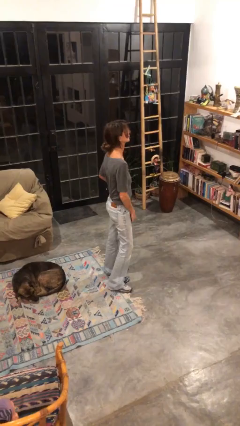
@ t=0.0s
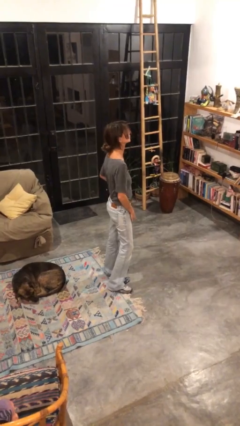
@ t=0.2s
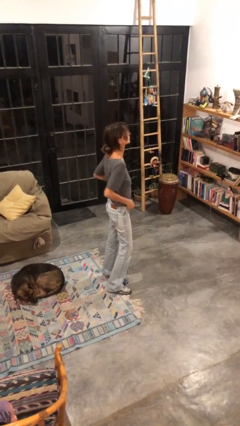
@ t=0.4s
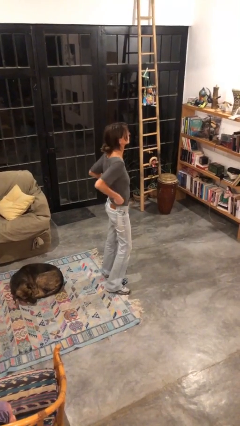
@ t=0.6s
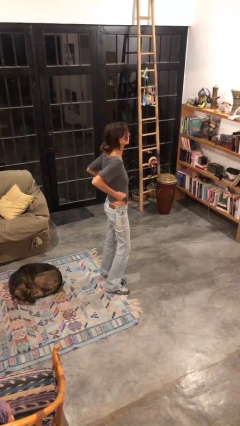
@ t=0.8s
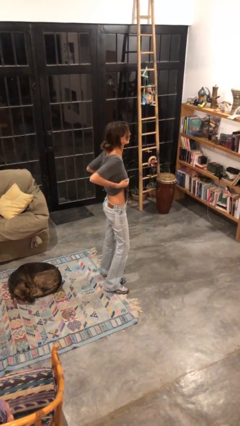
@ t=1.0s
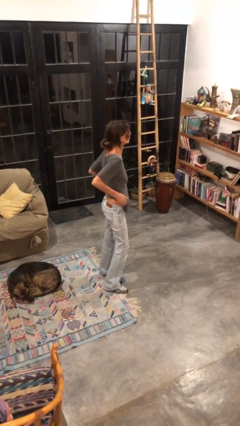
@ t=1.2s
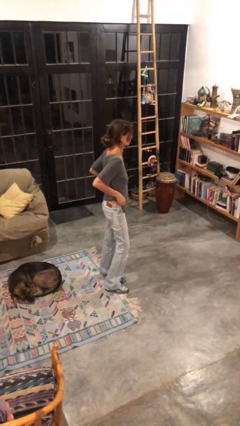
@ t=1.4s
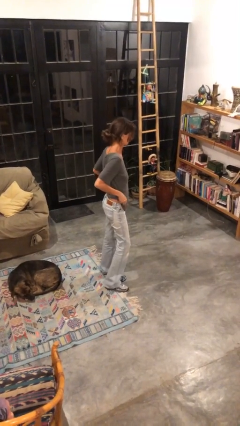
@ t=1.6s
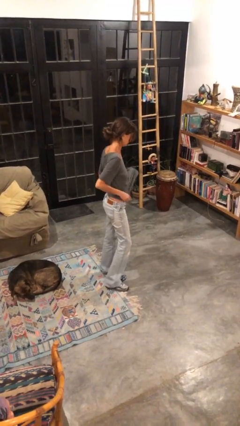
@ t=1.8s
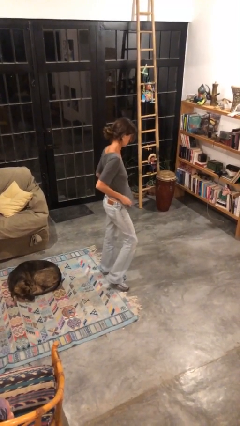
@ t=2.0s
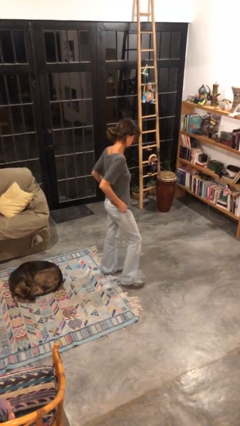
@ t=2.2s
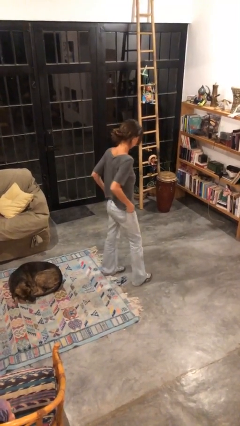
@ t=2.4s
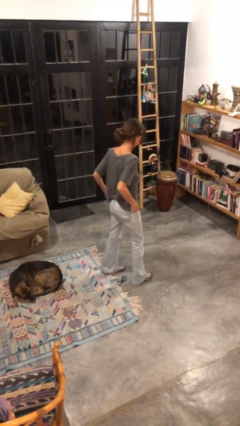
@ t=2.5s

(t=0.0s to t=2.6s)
person untucks shirt

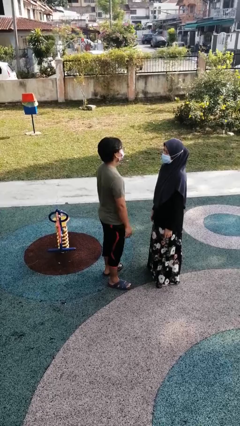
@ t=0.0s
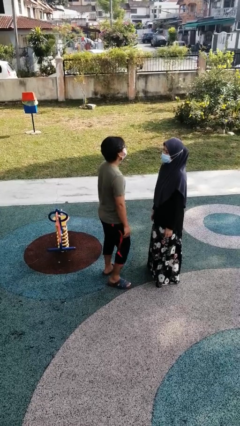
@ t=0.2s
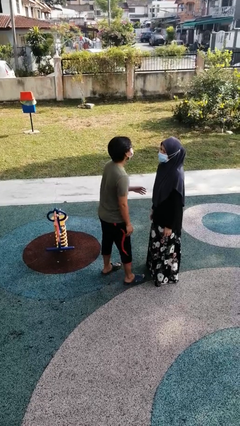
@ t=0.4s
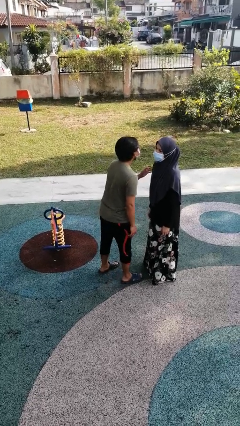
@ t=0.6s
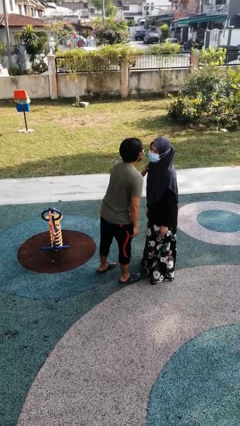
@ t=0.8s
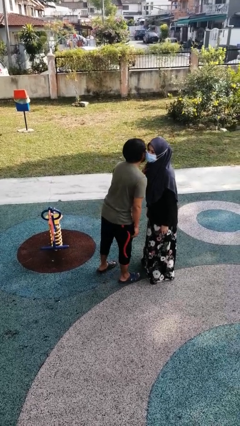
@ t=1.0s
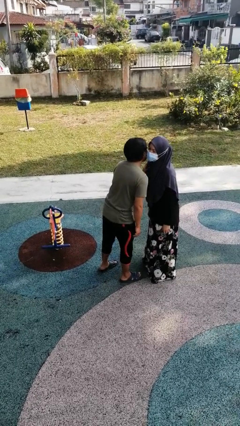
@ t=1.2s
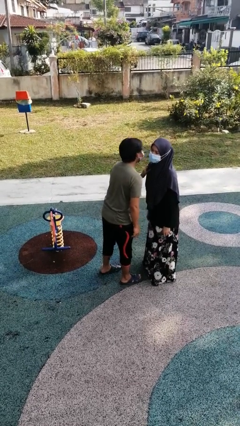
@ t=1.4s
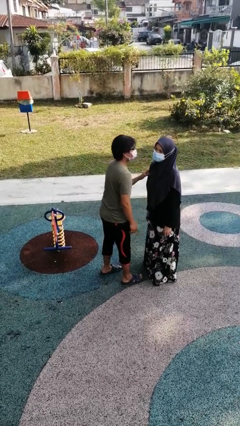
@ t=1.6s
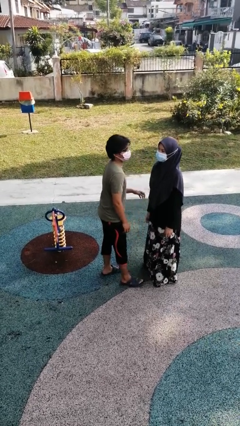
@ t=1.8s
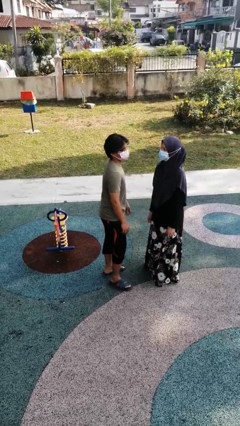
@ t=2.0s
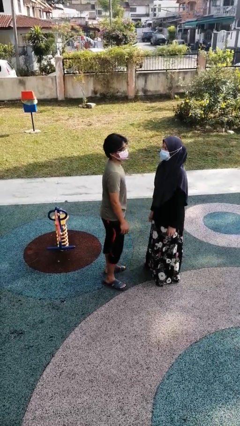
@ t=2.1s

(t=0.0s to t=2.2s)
person kisses cheek of person

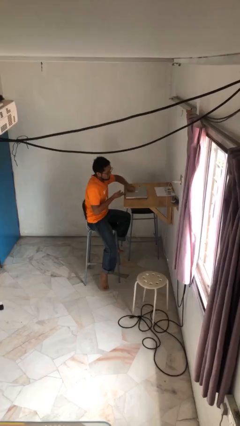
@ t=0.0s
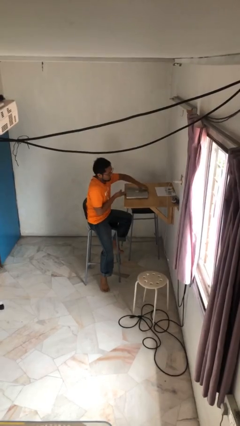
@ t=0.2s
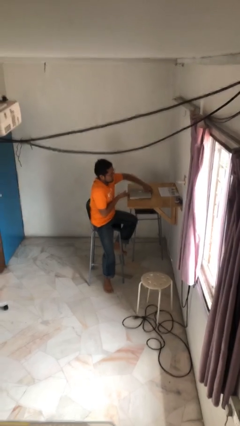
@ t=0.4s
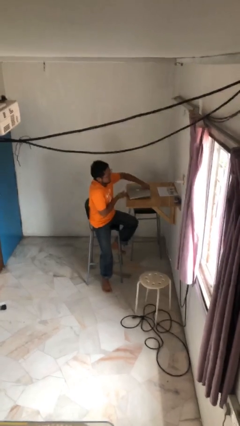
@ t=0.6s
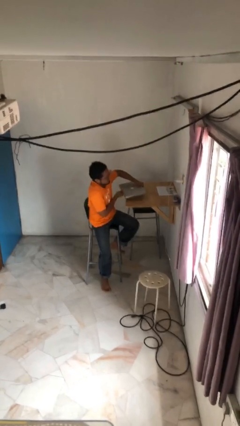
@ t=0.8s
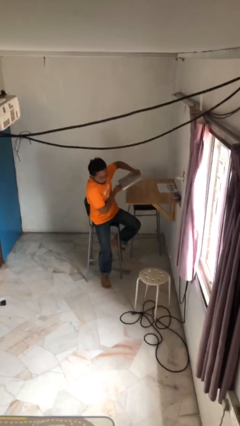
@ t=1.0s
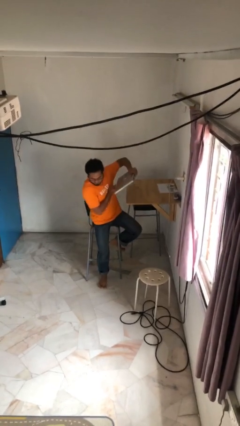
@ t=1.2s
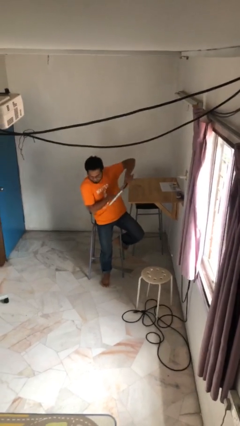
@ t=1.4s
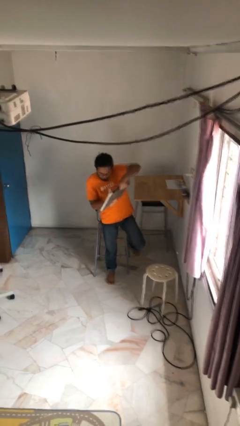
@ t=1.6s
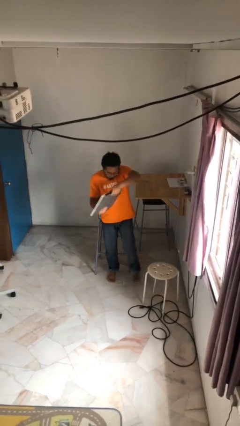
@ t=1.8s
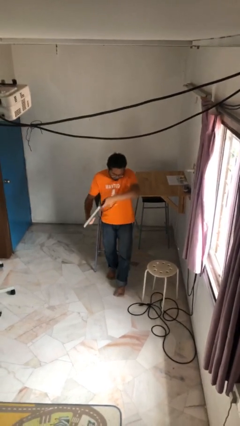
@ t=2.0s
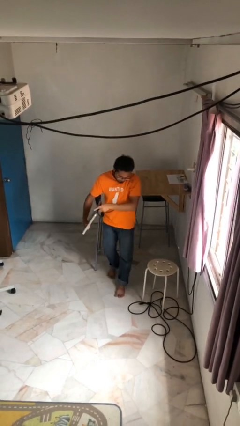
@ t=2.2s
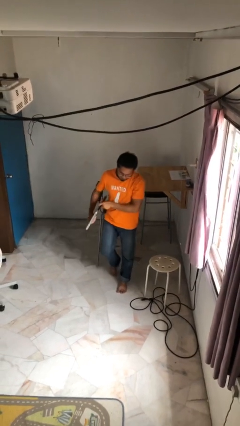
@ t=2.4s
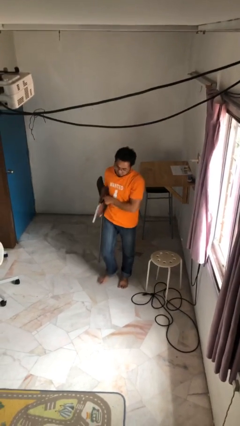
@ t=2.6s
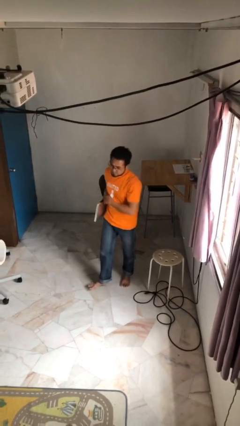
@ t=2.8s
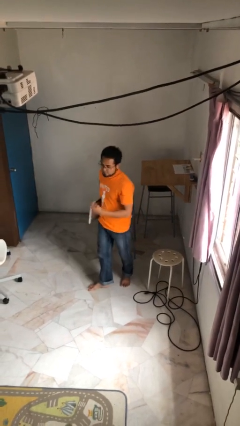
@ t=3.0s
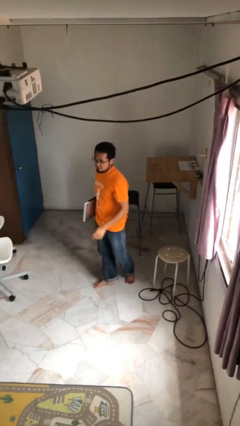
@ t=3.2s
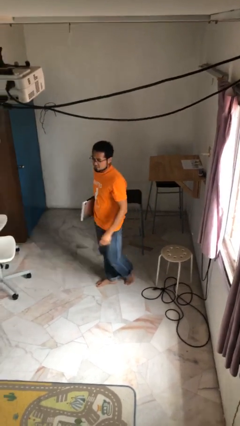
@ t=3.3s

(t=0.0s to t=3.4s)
person stands up

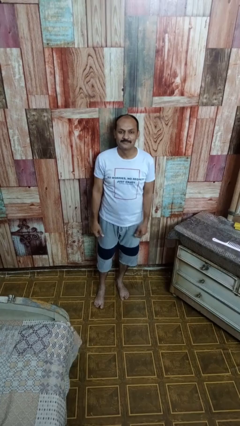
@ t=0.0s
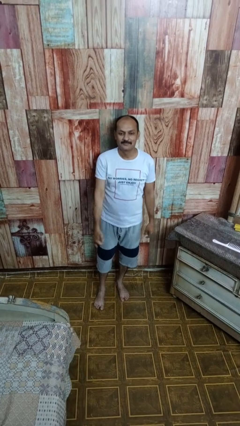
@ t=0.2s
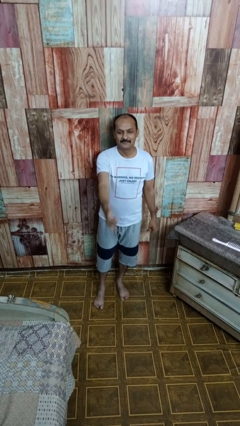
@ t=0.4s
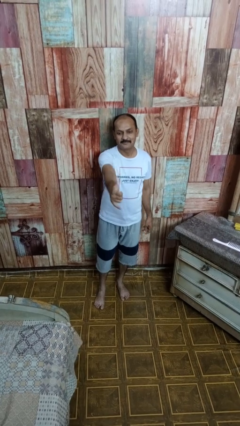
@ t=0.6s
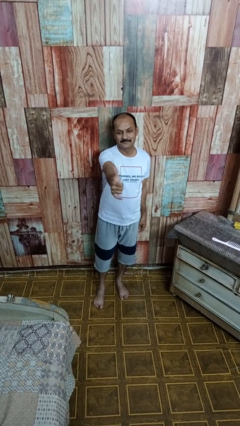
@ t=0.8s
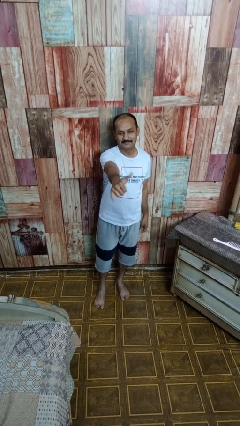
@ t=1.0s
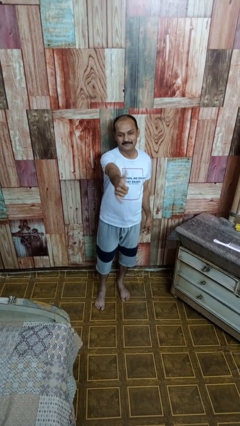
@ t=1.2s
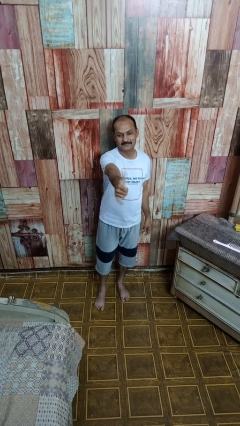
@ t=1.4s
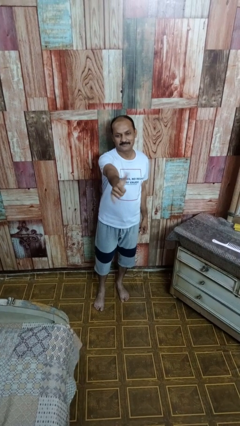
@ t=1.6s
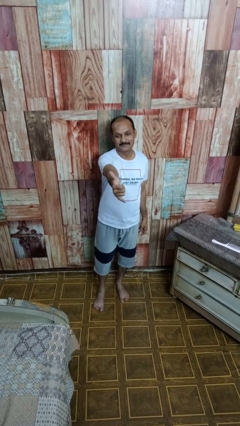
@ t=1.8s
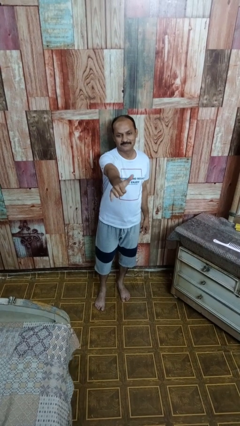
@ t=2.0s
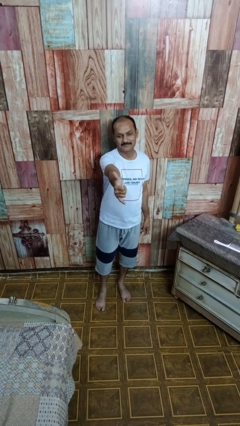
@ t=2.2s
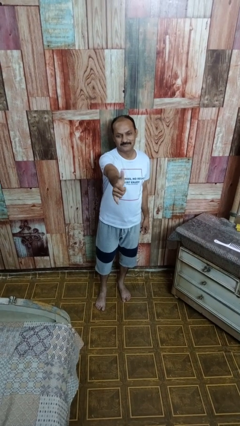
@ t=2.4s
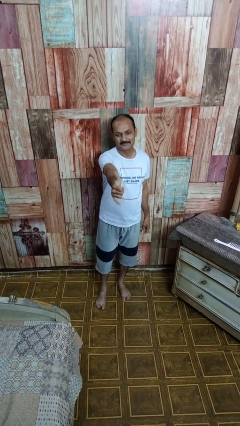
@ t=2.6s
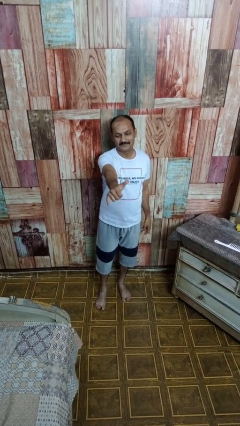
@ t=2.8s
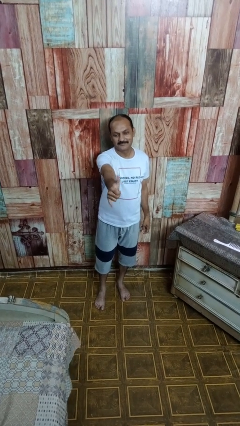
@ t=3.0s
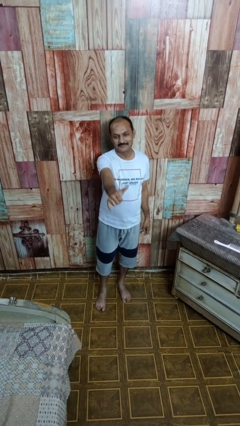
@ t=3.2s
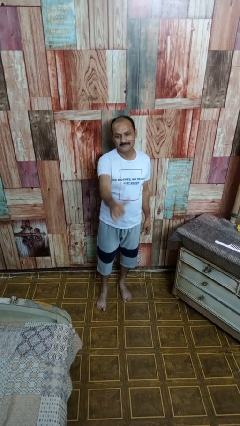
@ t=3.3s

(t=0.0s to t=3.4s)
person gestures hang loose

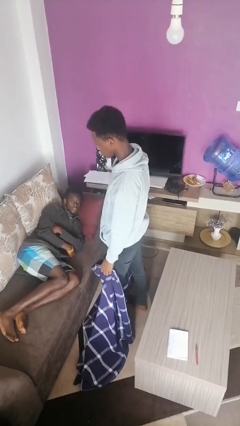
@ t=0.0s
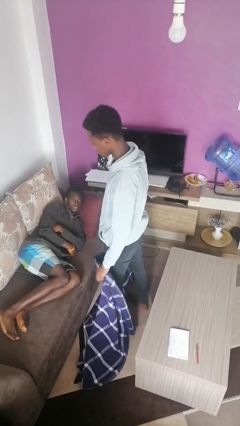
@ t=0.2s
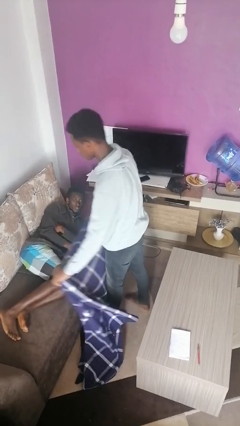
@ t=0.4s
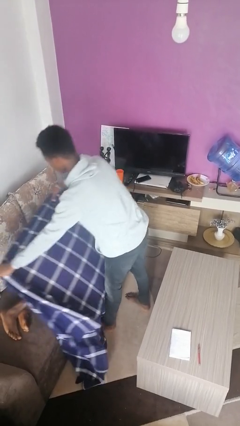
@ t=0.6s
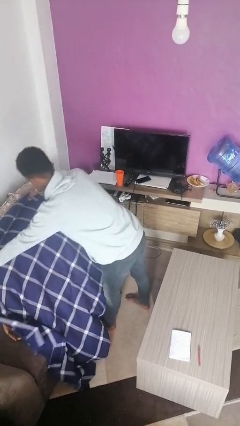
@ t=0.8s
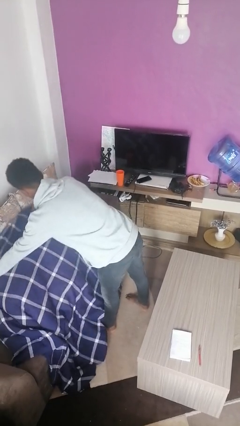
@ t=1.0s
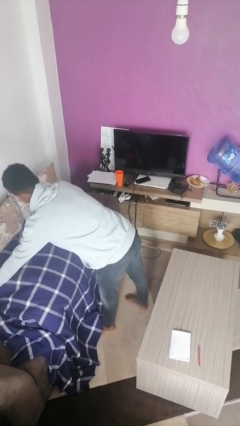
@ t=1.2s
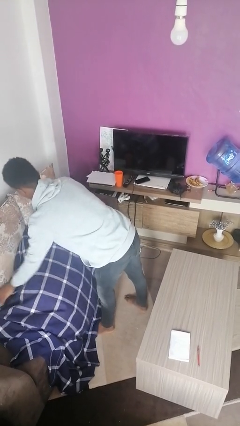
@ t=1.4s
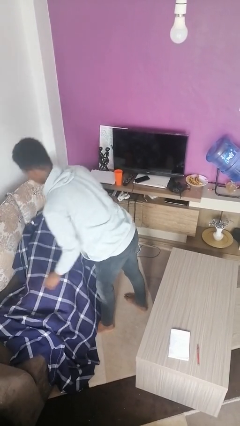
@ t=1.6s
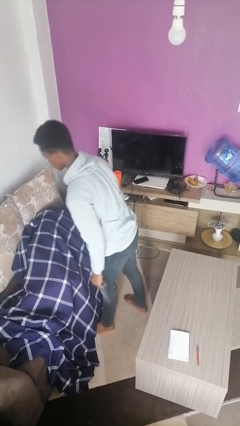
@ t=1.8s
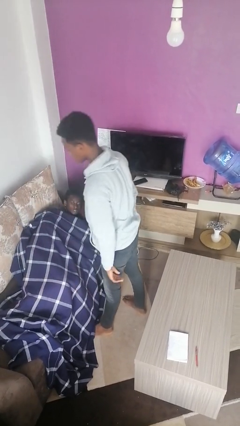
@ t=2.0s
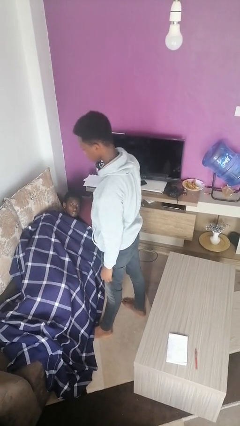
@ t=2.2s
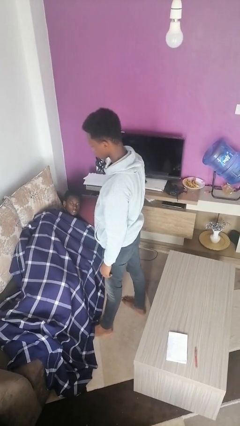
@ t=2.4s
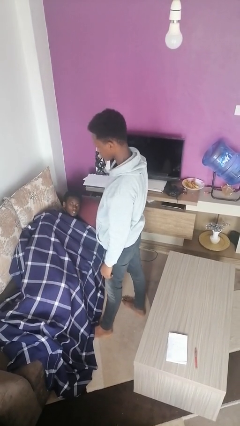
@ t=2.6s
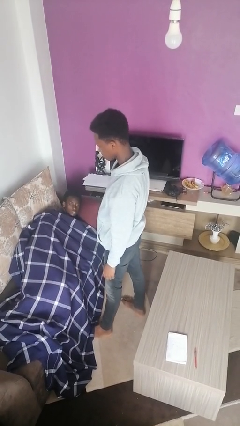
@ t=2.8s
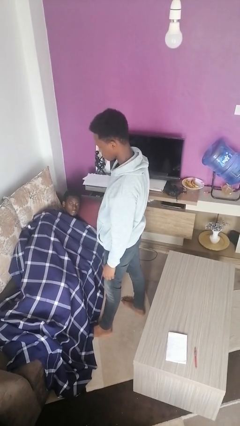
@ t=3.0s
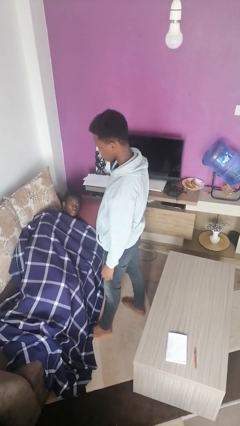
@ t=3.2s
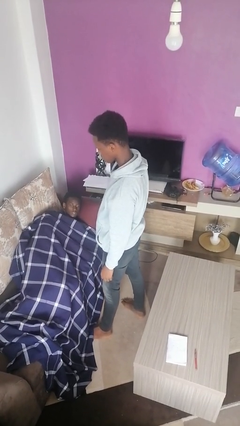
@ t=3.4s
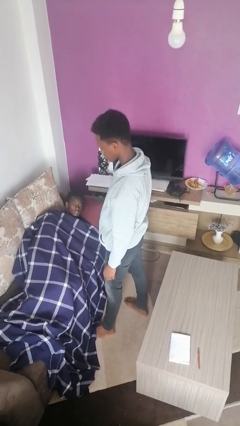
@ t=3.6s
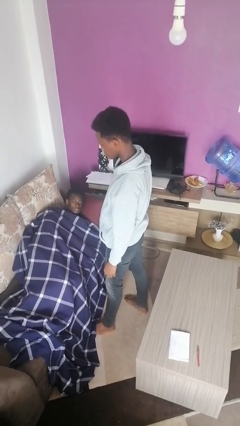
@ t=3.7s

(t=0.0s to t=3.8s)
person covers friend with blanket

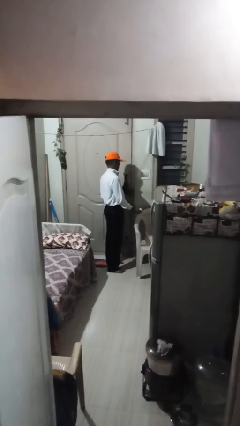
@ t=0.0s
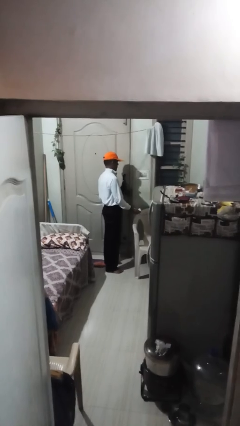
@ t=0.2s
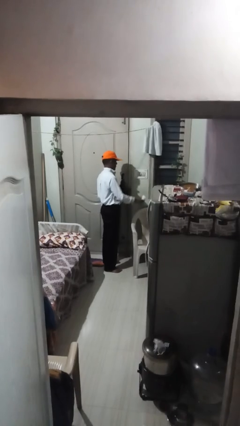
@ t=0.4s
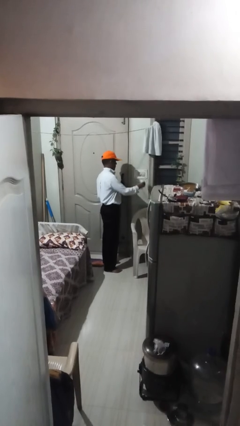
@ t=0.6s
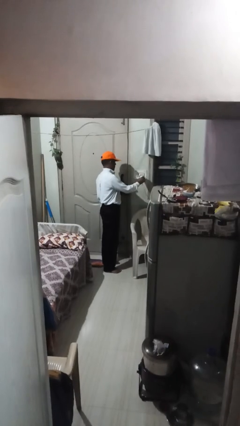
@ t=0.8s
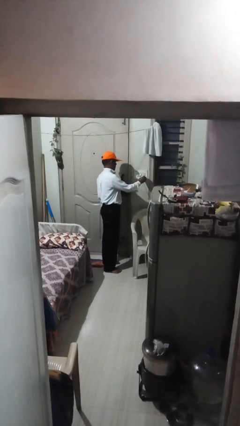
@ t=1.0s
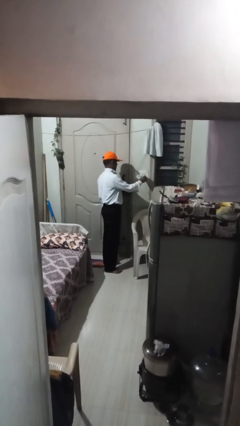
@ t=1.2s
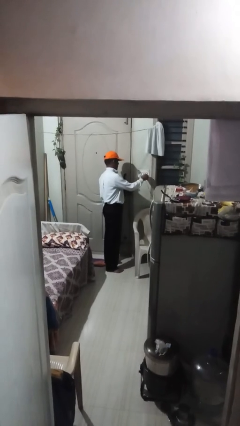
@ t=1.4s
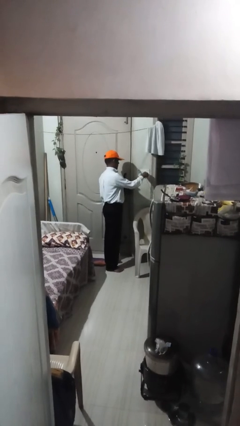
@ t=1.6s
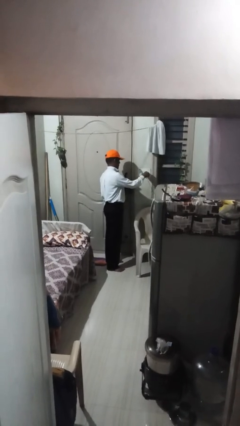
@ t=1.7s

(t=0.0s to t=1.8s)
person plugs into electrical socket
